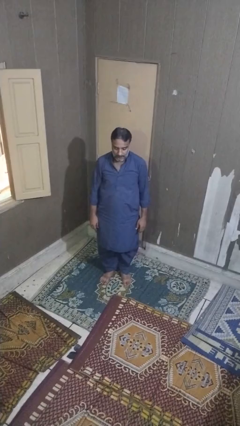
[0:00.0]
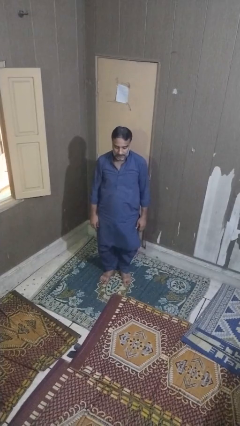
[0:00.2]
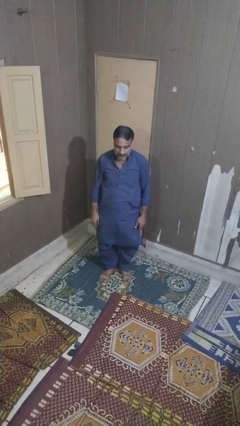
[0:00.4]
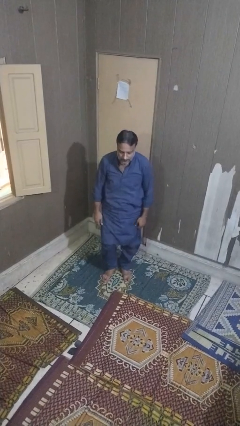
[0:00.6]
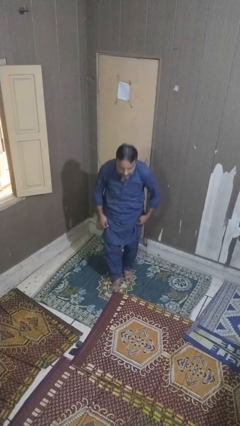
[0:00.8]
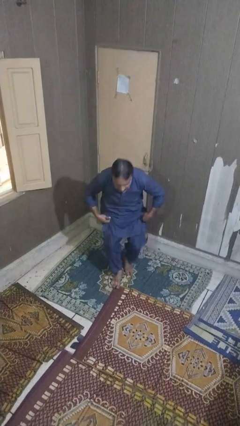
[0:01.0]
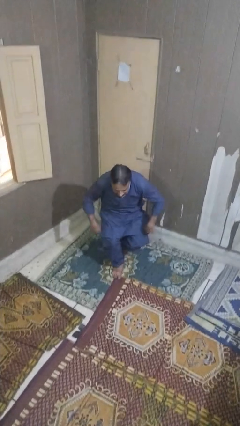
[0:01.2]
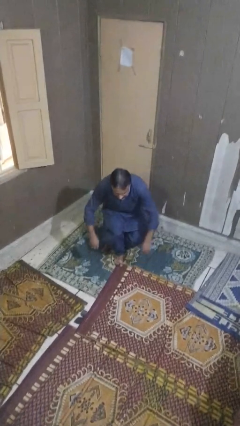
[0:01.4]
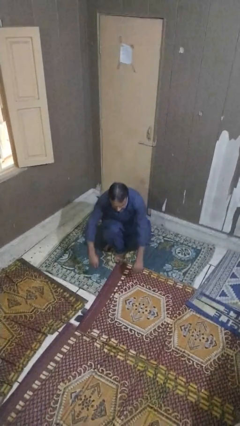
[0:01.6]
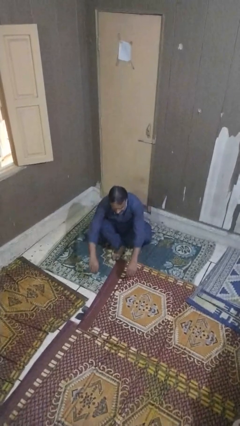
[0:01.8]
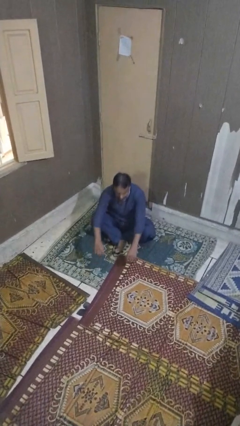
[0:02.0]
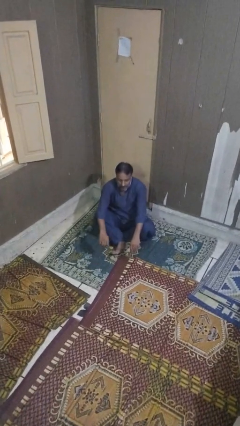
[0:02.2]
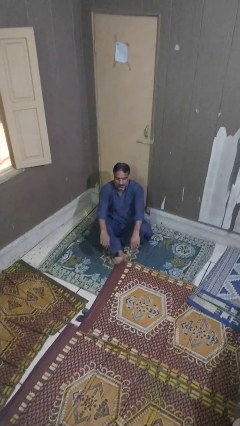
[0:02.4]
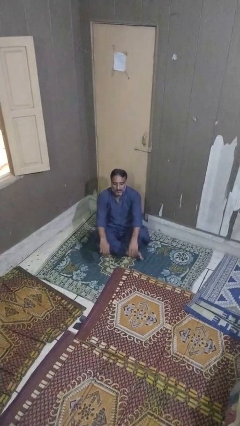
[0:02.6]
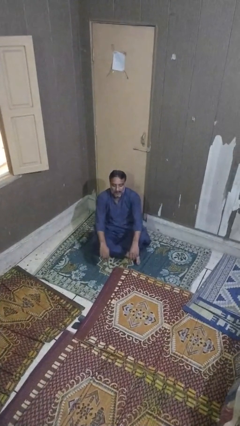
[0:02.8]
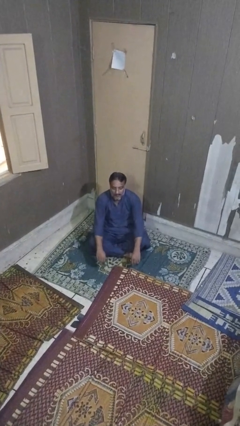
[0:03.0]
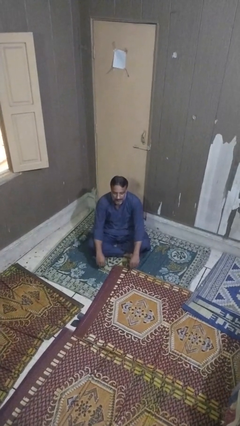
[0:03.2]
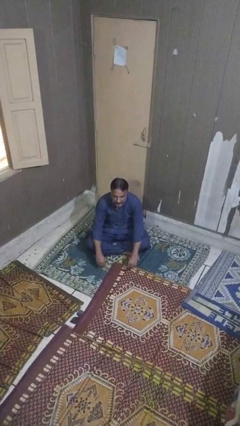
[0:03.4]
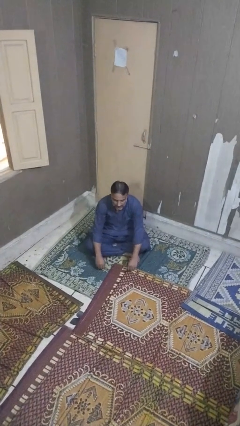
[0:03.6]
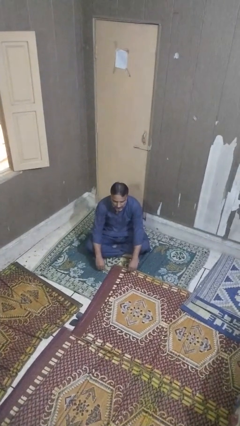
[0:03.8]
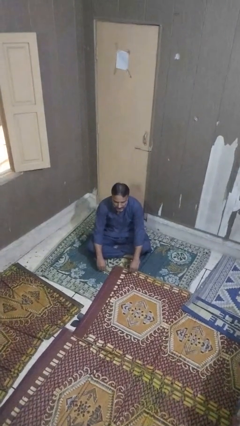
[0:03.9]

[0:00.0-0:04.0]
person sits crisscross

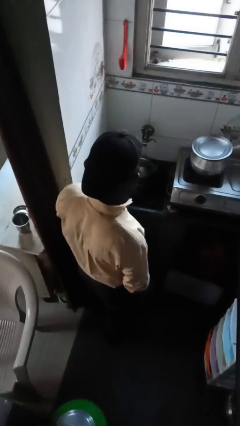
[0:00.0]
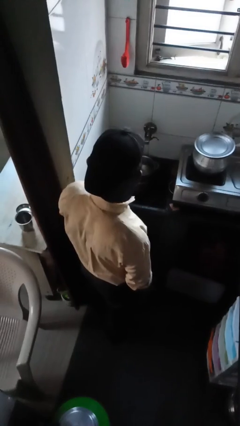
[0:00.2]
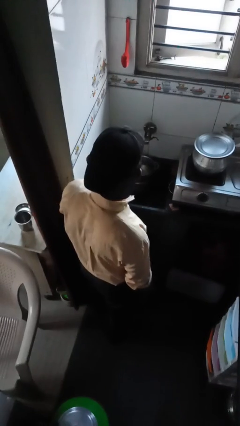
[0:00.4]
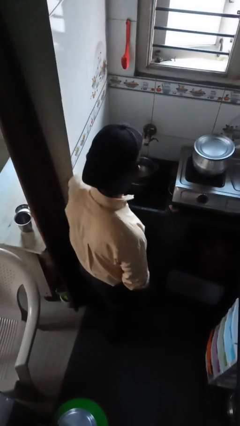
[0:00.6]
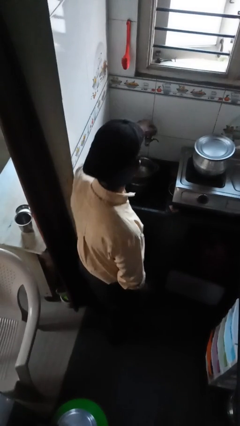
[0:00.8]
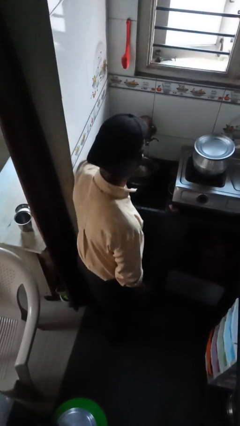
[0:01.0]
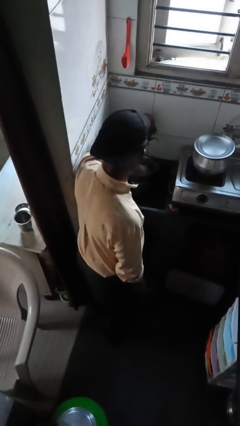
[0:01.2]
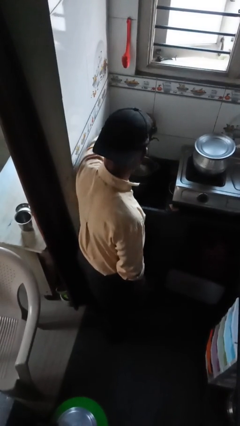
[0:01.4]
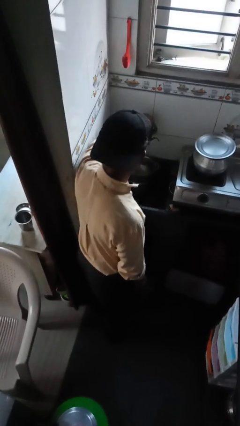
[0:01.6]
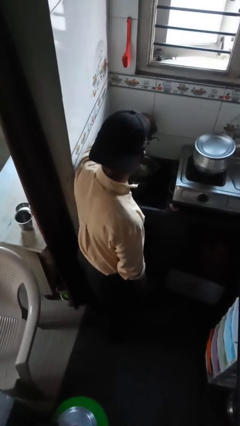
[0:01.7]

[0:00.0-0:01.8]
person turns off faucet

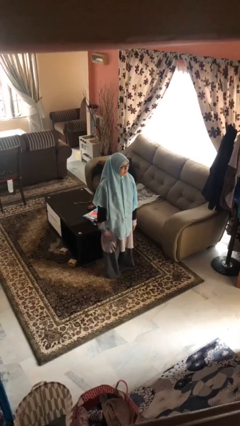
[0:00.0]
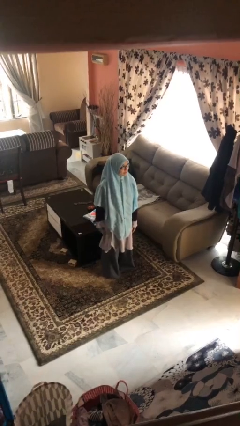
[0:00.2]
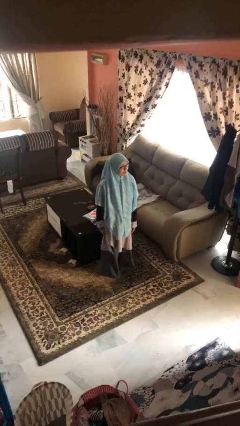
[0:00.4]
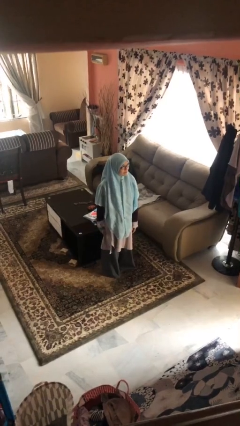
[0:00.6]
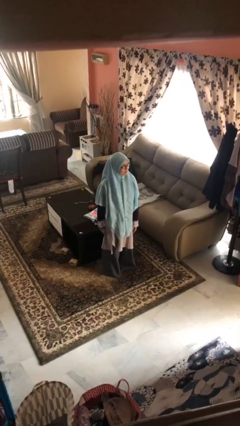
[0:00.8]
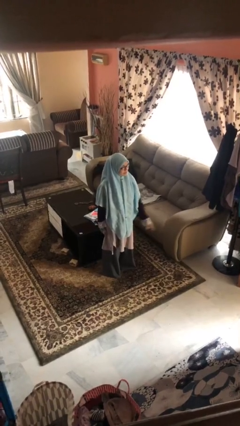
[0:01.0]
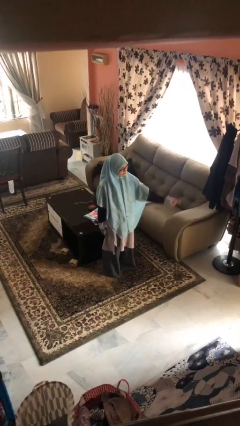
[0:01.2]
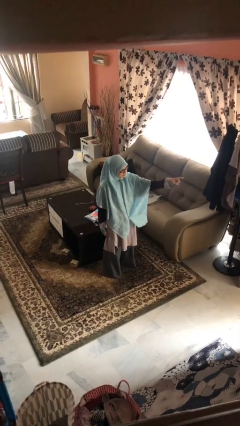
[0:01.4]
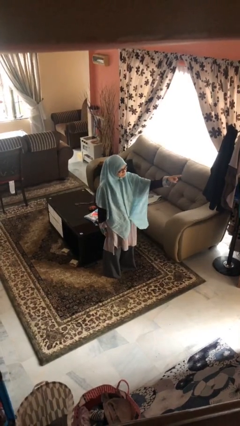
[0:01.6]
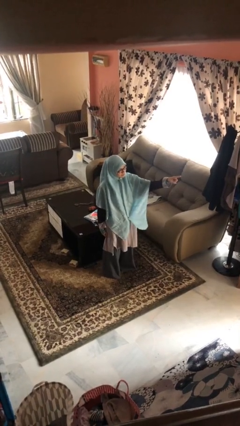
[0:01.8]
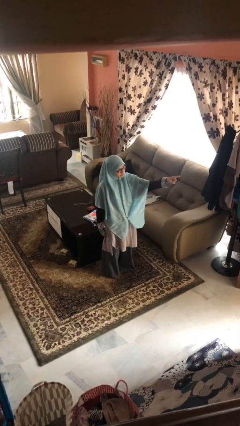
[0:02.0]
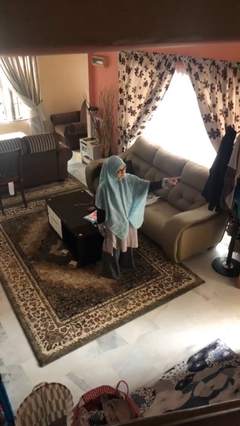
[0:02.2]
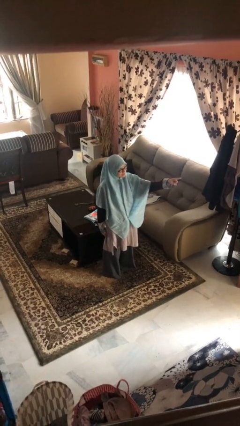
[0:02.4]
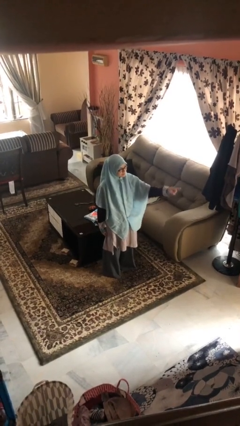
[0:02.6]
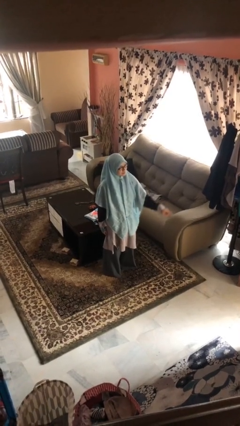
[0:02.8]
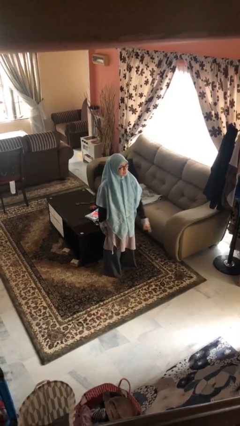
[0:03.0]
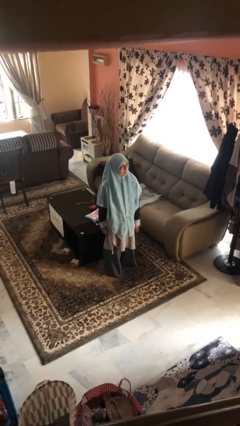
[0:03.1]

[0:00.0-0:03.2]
person points at person

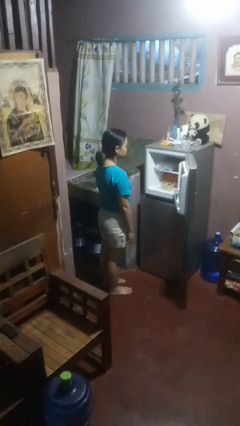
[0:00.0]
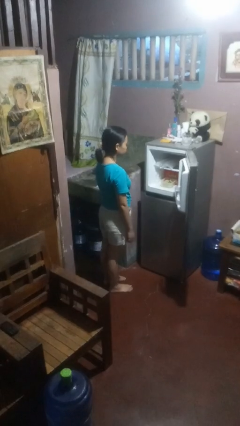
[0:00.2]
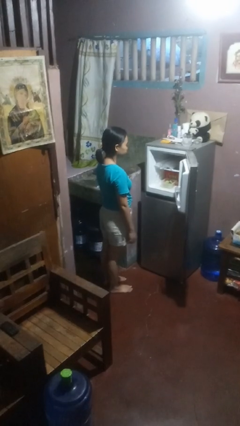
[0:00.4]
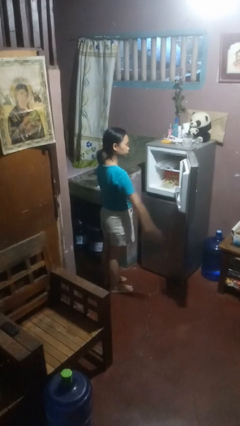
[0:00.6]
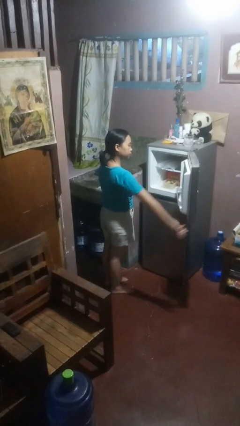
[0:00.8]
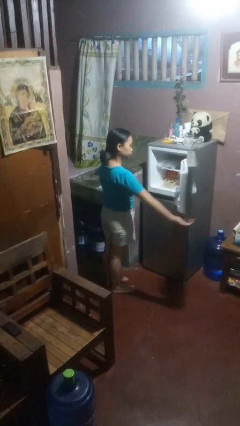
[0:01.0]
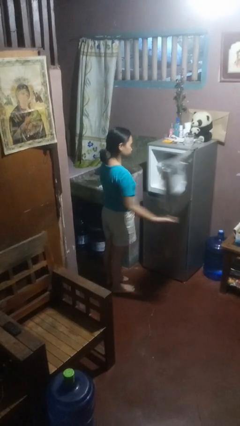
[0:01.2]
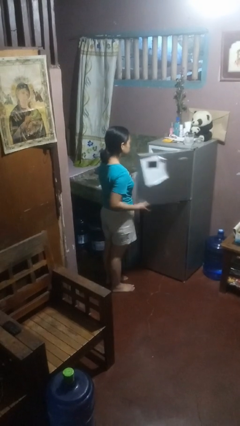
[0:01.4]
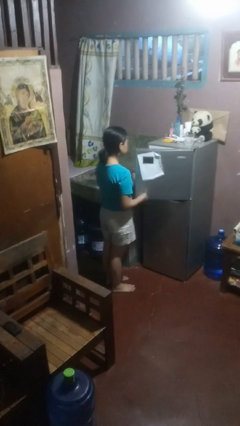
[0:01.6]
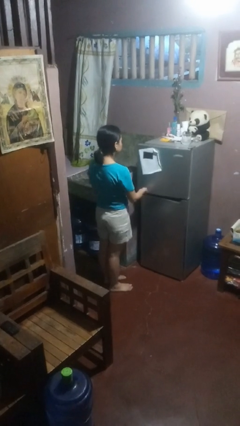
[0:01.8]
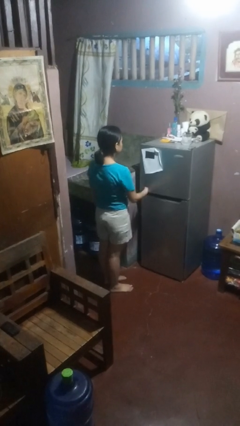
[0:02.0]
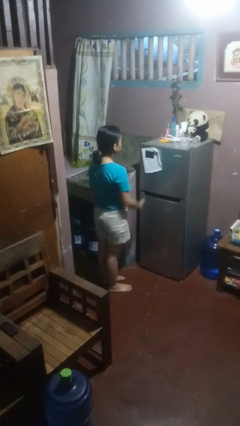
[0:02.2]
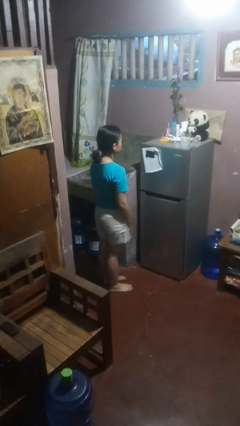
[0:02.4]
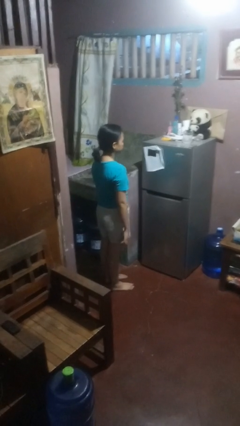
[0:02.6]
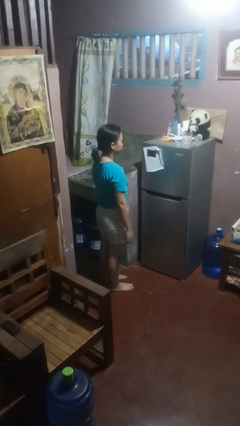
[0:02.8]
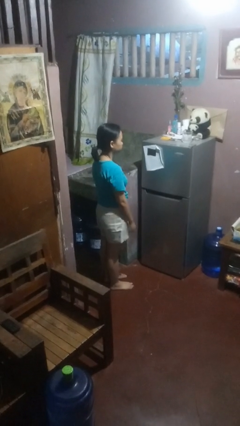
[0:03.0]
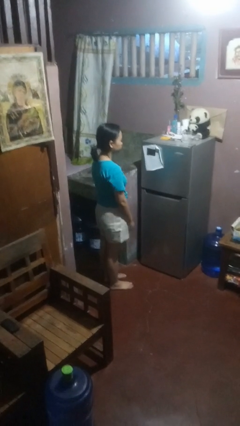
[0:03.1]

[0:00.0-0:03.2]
person closes refrigerator

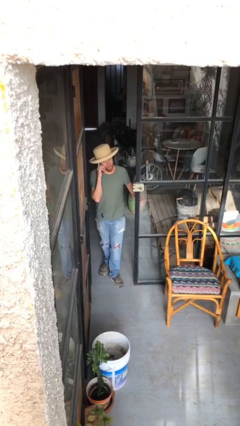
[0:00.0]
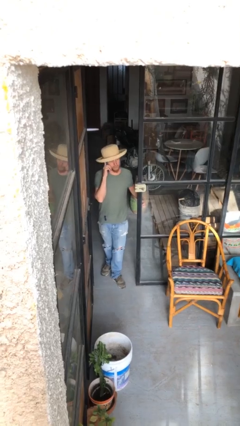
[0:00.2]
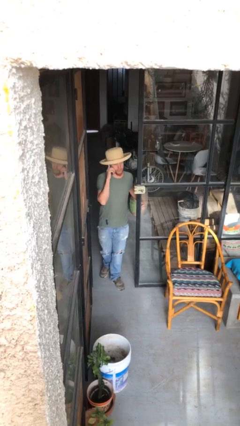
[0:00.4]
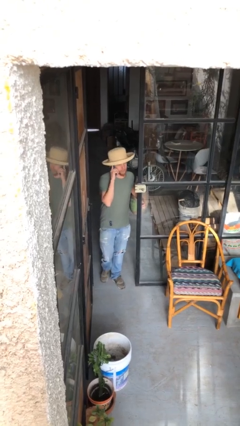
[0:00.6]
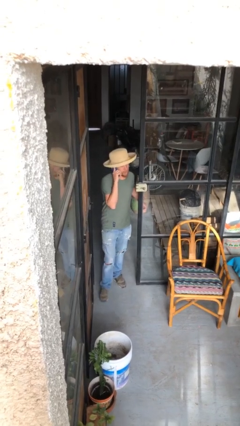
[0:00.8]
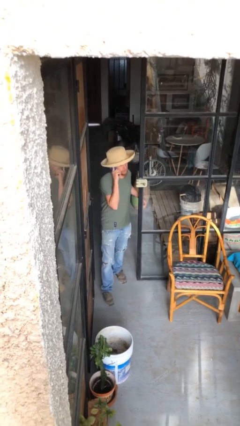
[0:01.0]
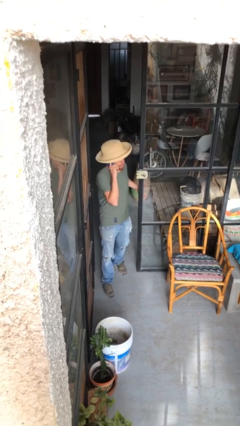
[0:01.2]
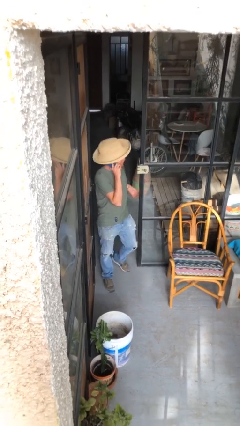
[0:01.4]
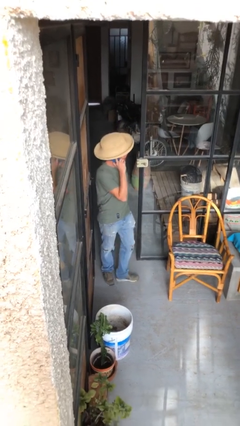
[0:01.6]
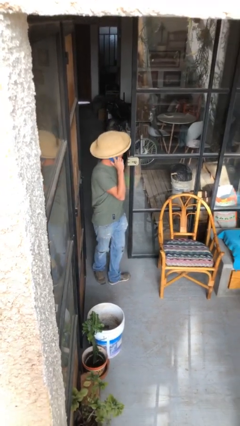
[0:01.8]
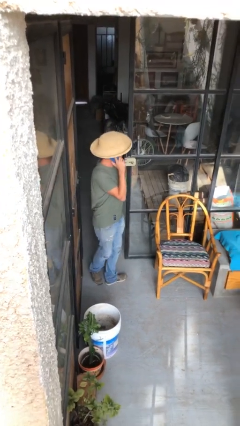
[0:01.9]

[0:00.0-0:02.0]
person enters scene through structure

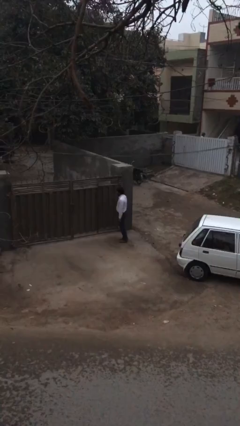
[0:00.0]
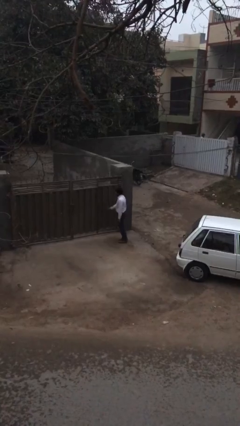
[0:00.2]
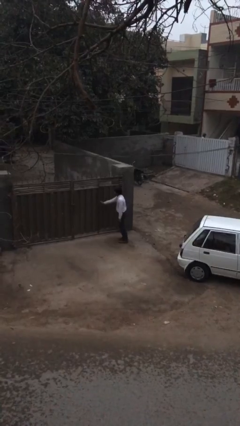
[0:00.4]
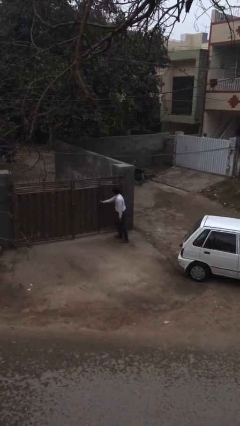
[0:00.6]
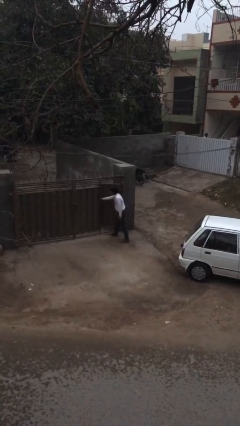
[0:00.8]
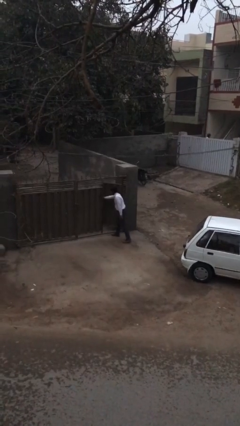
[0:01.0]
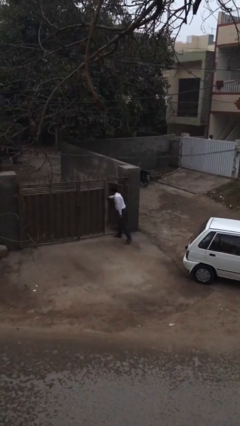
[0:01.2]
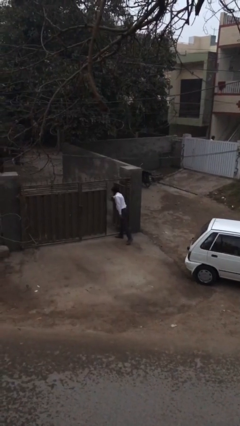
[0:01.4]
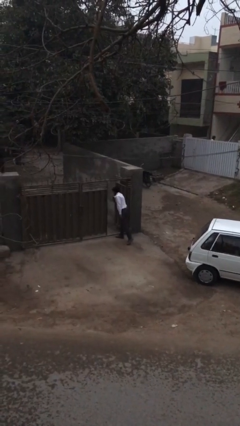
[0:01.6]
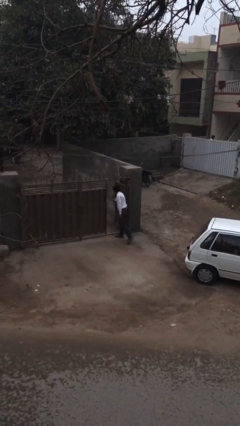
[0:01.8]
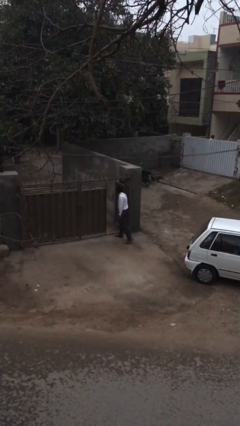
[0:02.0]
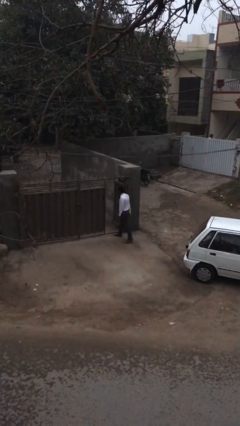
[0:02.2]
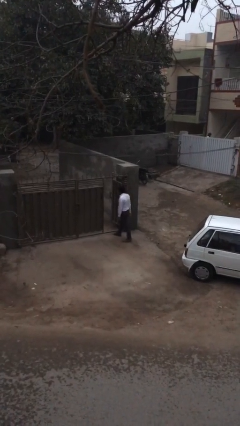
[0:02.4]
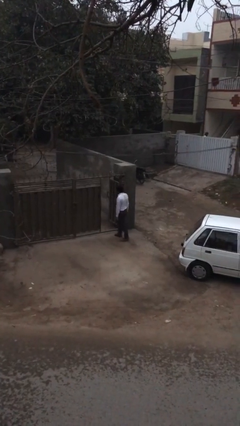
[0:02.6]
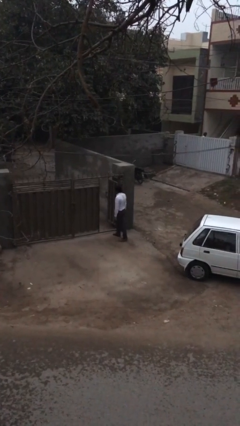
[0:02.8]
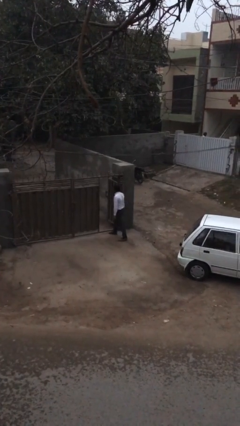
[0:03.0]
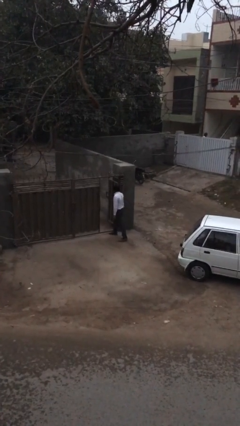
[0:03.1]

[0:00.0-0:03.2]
person opens facility door

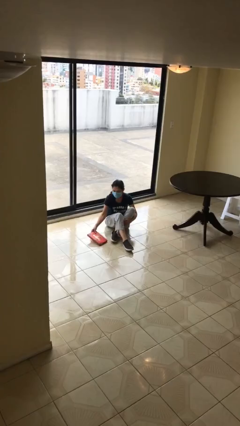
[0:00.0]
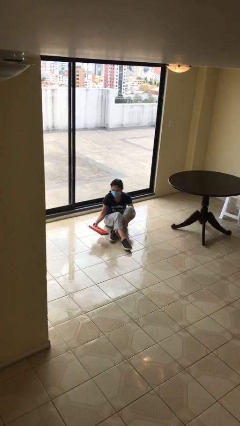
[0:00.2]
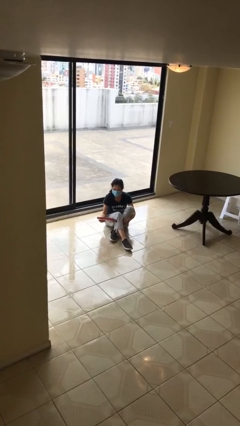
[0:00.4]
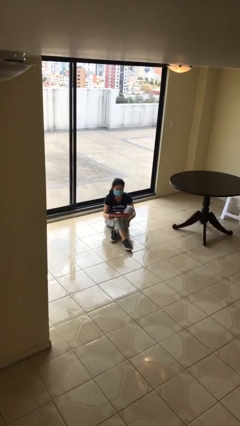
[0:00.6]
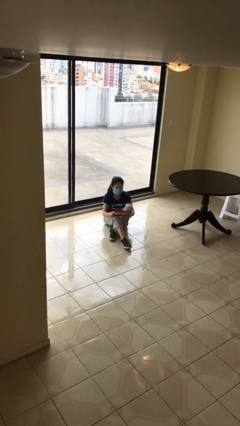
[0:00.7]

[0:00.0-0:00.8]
person picks up object from floor
